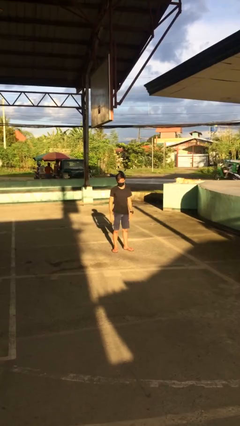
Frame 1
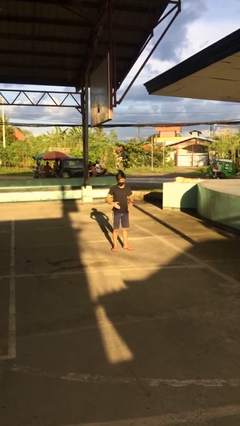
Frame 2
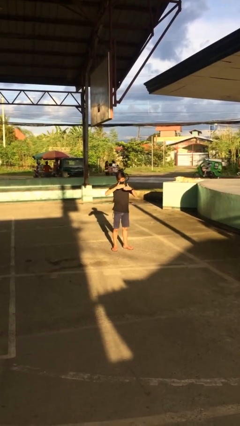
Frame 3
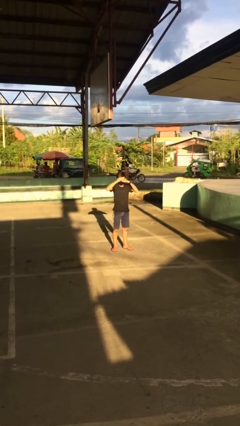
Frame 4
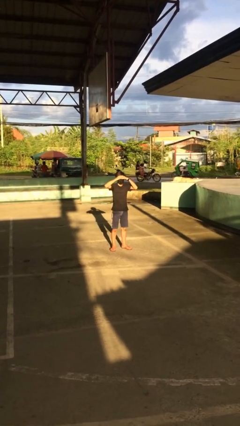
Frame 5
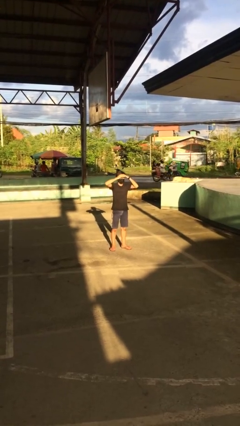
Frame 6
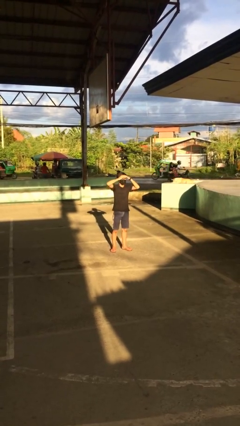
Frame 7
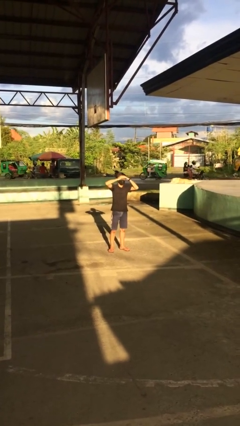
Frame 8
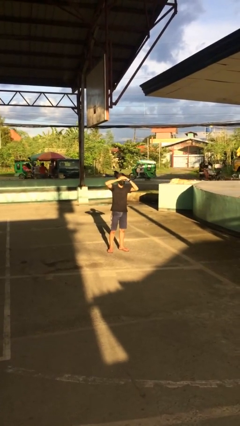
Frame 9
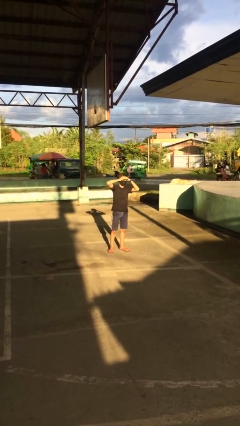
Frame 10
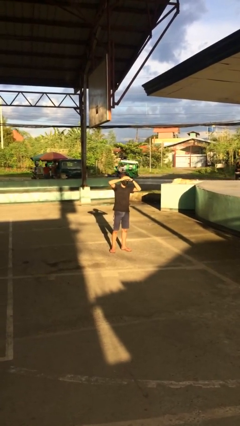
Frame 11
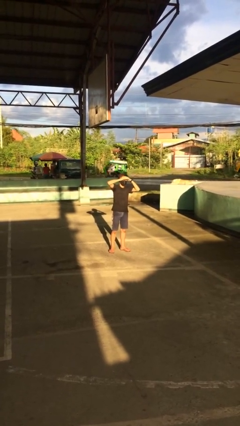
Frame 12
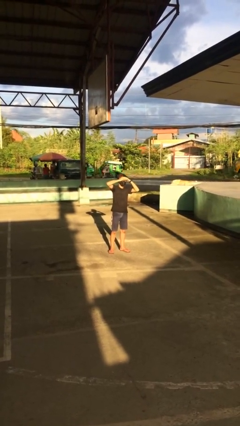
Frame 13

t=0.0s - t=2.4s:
person shades eyes

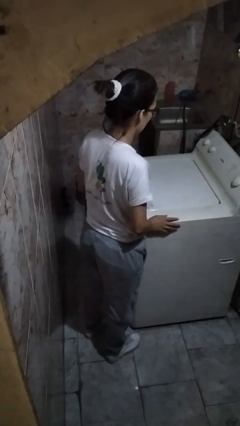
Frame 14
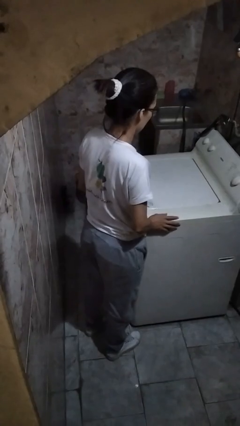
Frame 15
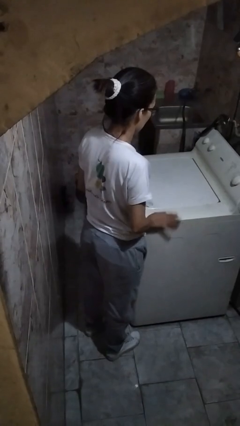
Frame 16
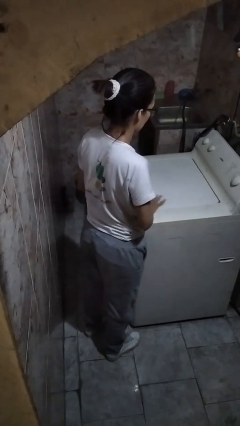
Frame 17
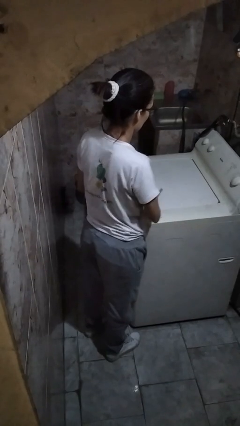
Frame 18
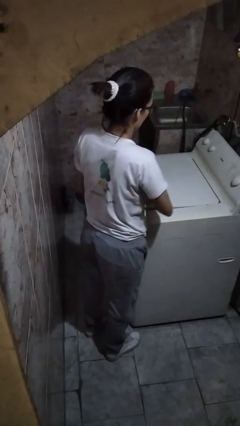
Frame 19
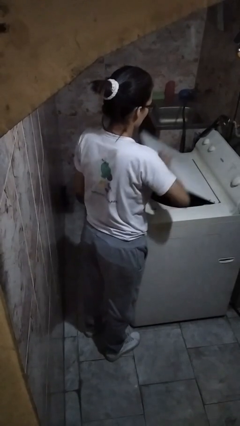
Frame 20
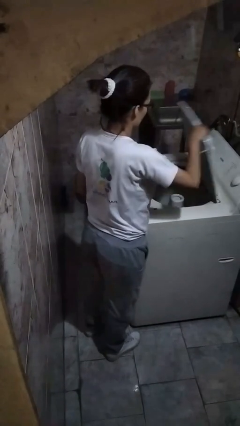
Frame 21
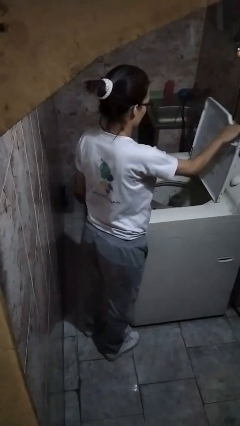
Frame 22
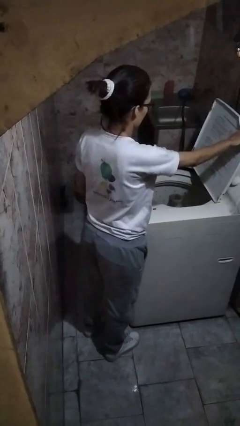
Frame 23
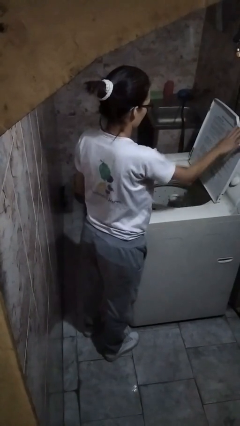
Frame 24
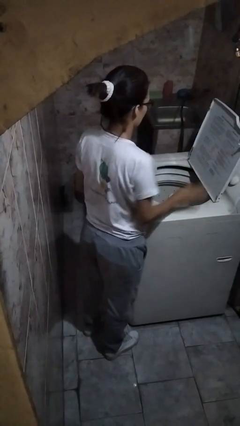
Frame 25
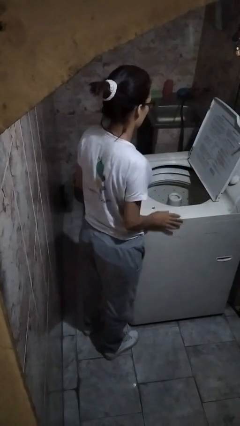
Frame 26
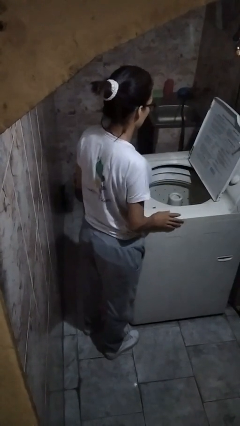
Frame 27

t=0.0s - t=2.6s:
person opens clothes washer

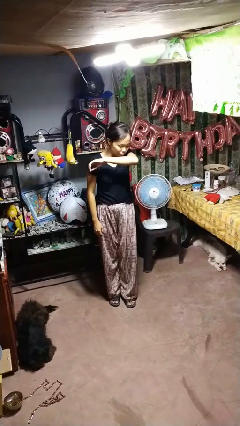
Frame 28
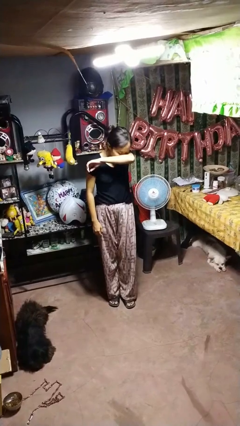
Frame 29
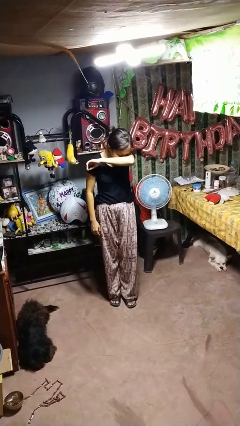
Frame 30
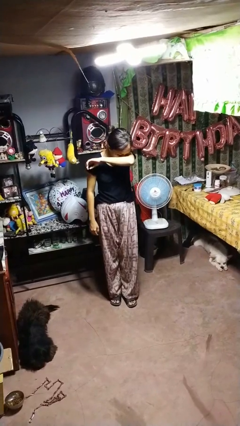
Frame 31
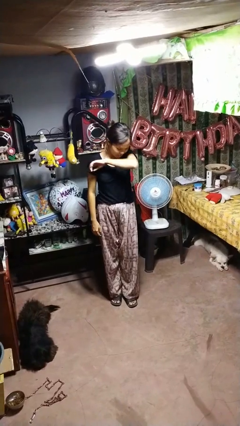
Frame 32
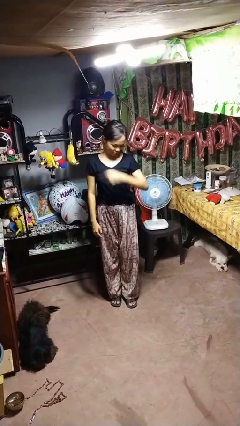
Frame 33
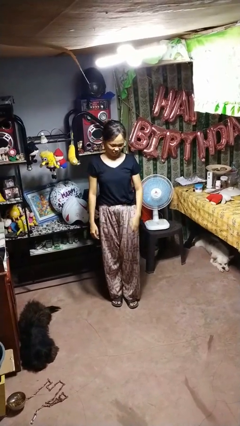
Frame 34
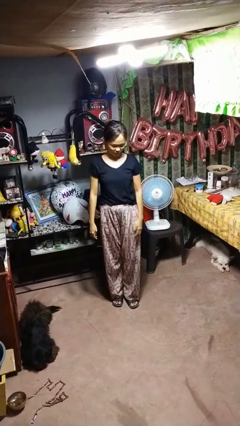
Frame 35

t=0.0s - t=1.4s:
person sneezes into arm

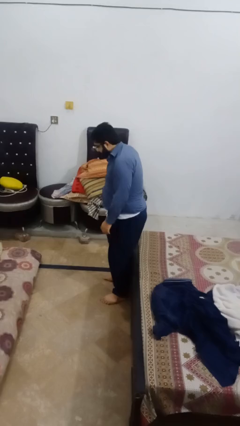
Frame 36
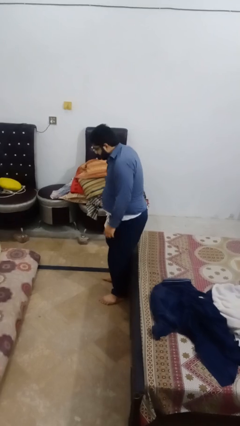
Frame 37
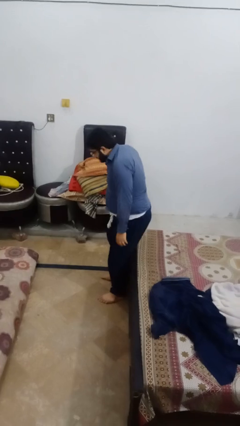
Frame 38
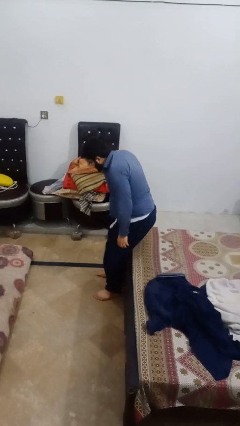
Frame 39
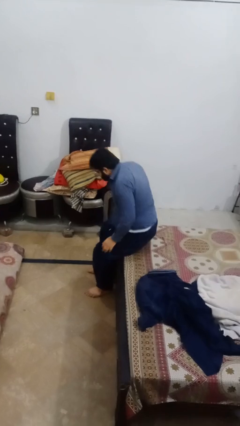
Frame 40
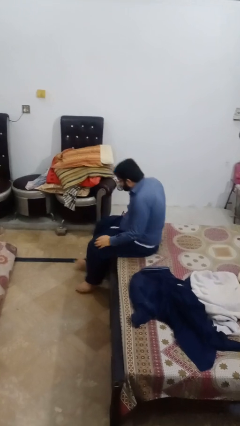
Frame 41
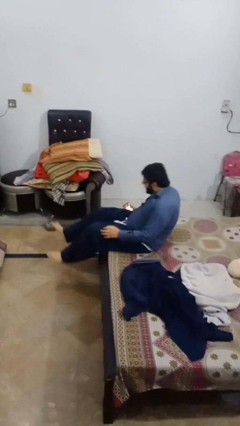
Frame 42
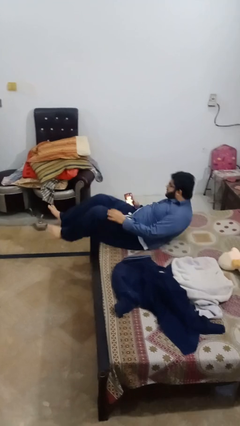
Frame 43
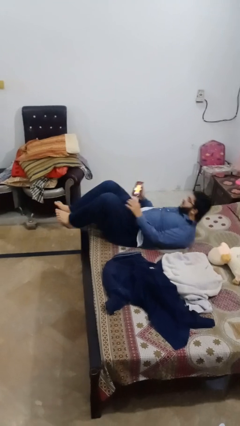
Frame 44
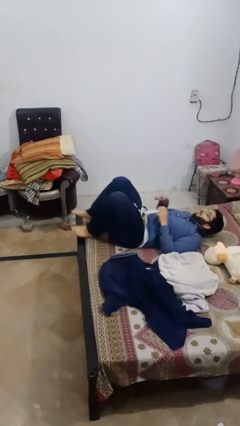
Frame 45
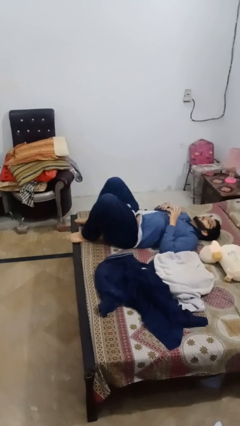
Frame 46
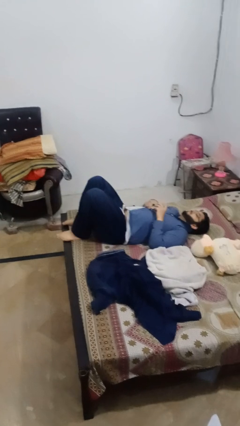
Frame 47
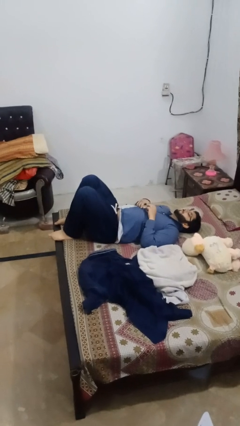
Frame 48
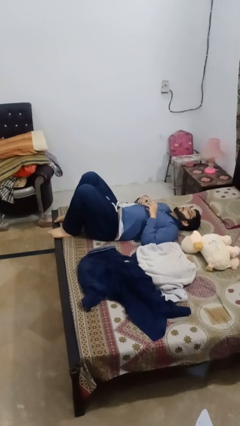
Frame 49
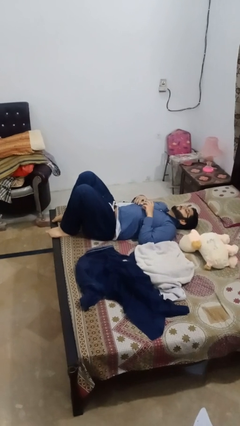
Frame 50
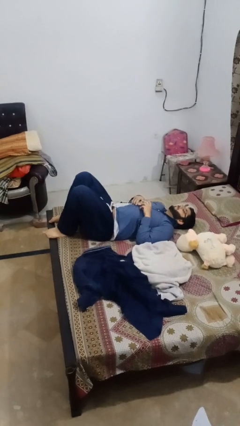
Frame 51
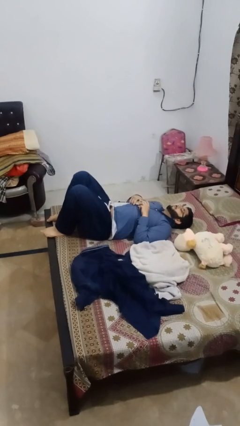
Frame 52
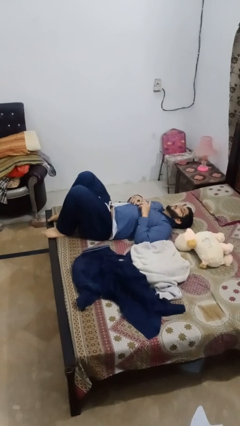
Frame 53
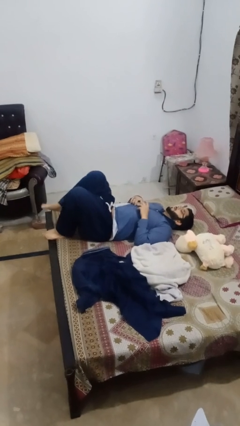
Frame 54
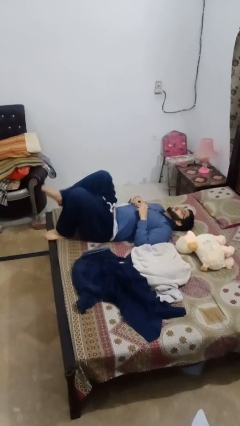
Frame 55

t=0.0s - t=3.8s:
person lies down on bed

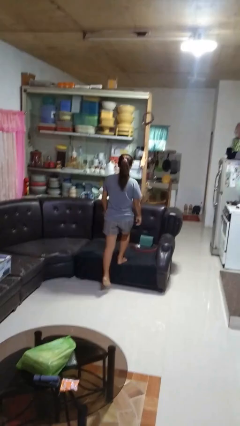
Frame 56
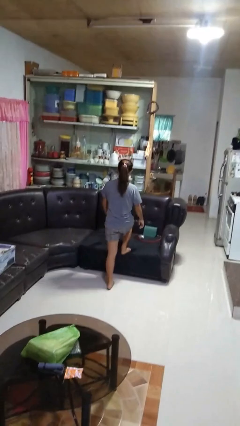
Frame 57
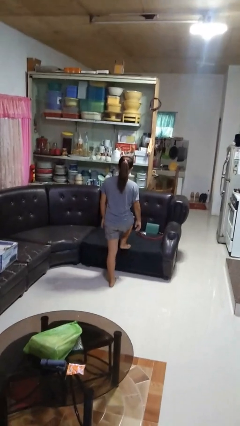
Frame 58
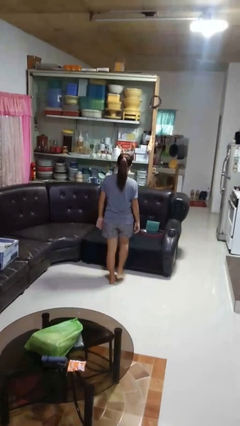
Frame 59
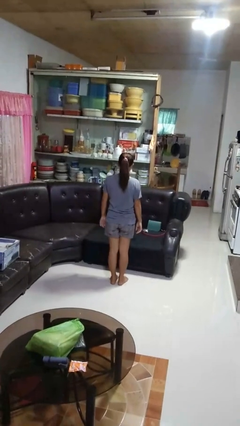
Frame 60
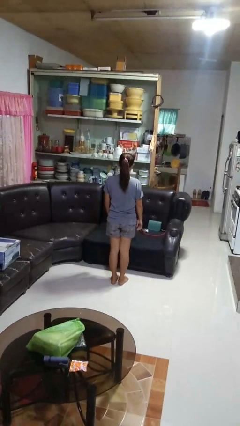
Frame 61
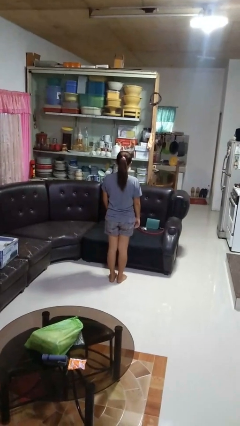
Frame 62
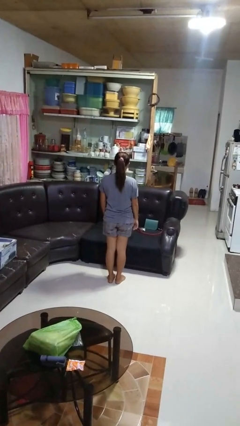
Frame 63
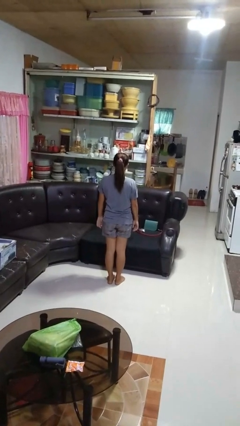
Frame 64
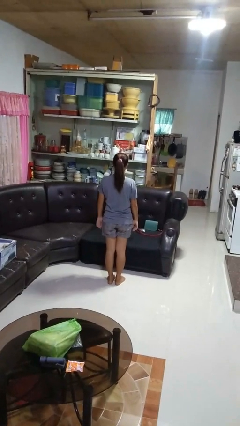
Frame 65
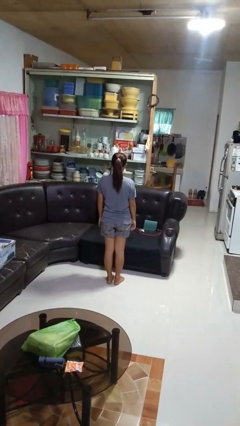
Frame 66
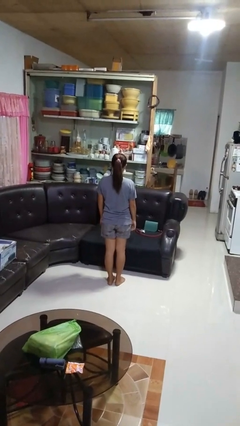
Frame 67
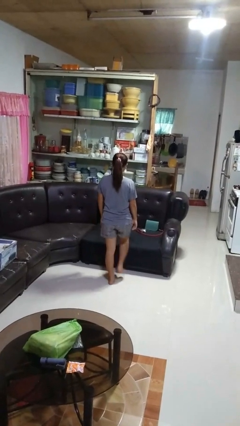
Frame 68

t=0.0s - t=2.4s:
person climbs off couch

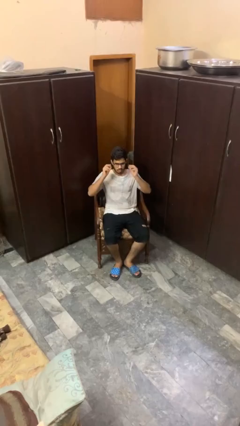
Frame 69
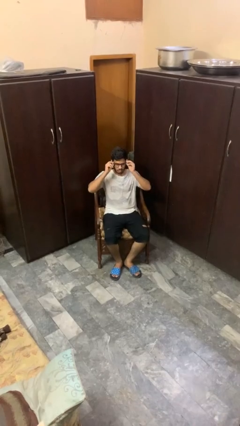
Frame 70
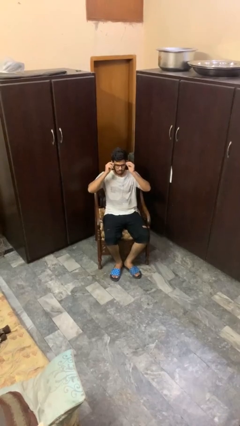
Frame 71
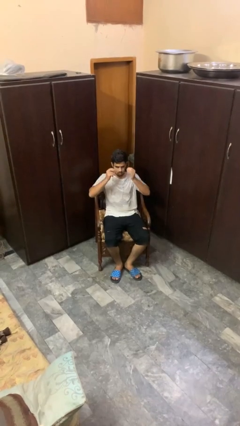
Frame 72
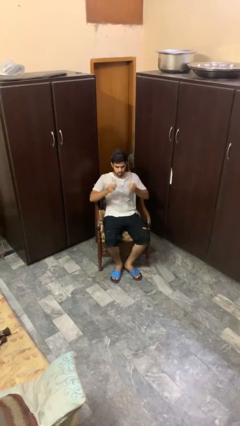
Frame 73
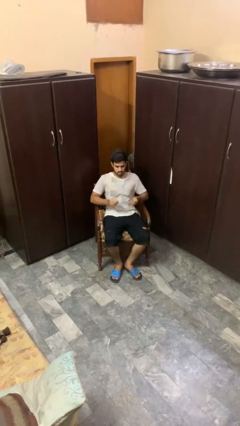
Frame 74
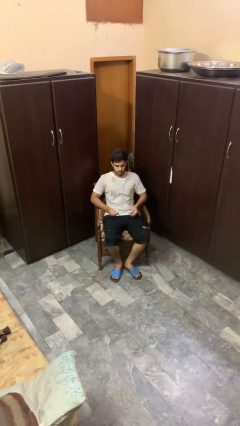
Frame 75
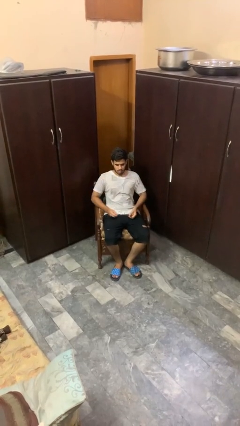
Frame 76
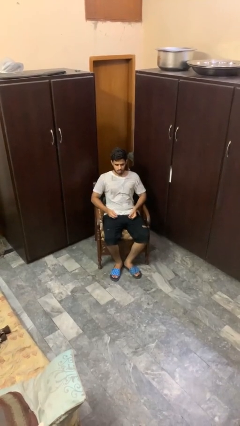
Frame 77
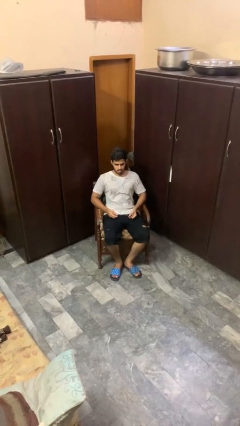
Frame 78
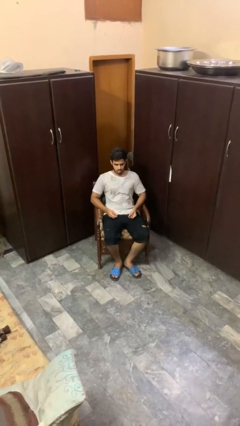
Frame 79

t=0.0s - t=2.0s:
person takes off glasses

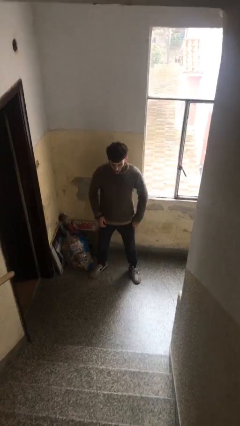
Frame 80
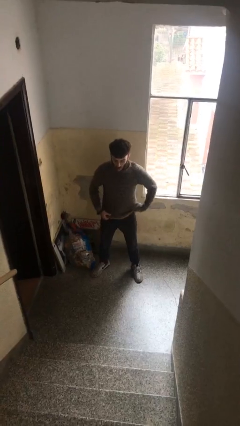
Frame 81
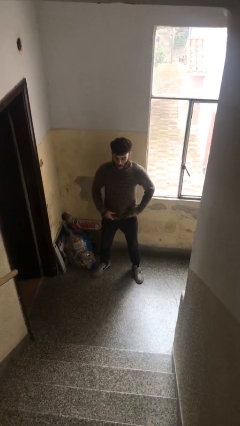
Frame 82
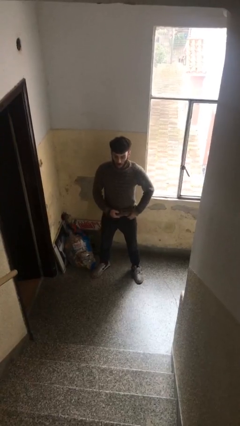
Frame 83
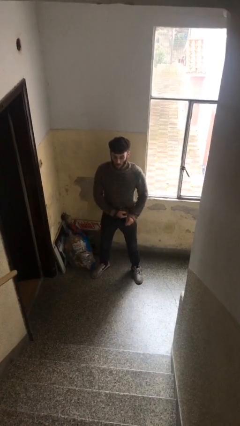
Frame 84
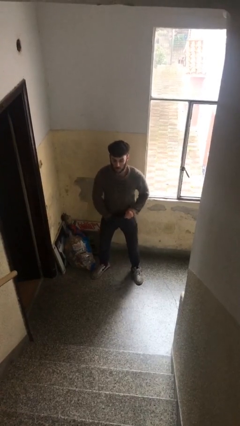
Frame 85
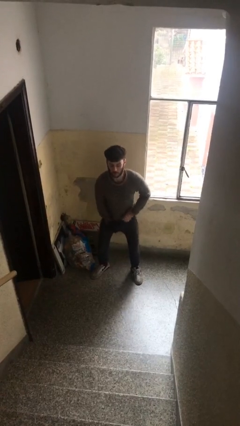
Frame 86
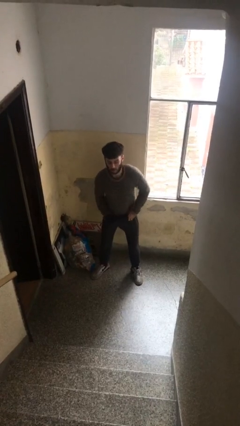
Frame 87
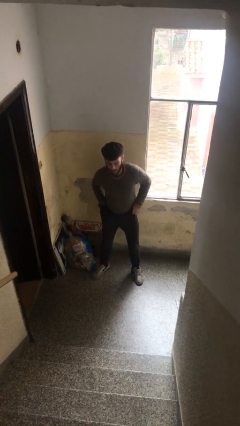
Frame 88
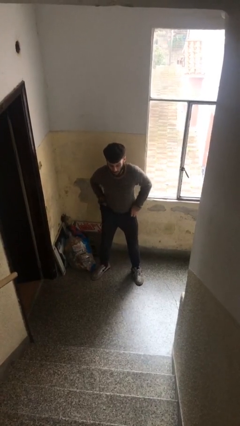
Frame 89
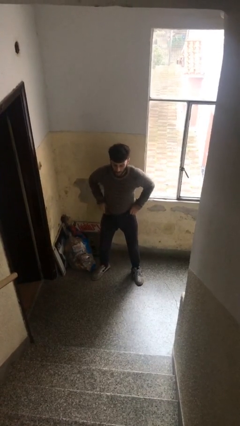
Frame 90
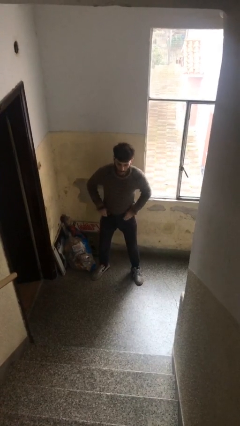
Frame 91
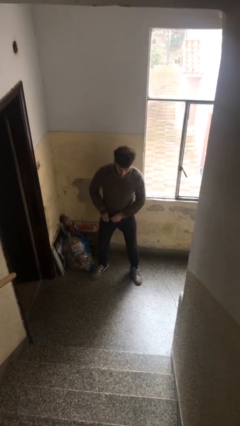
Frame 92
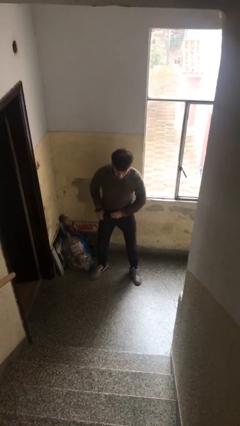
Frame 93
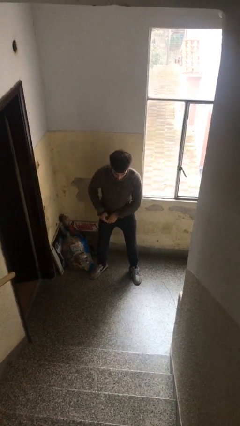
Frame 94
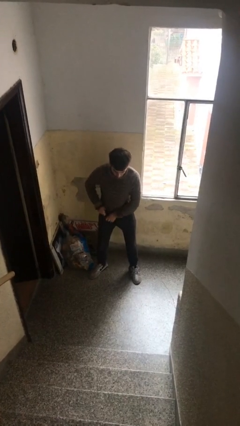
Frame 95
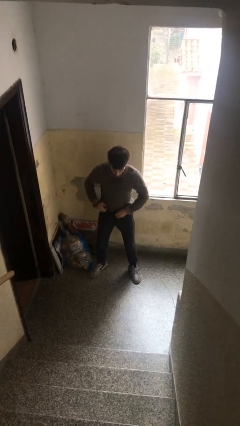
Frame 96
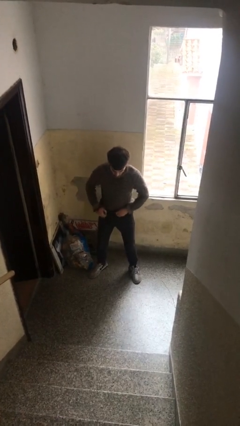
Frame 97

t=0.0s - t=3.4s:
person tucks in shirt
